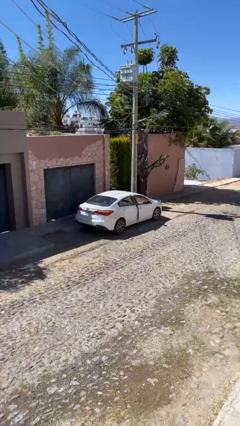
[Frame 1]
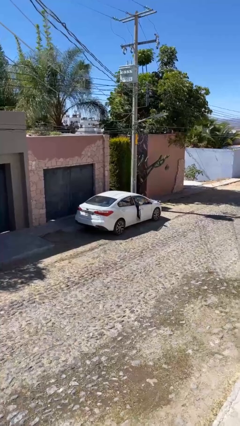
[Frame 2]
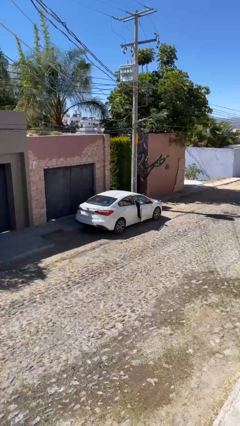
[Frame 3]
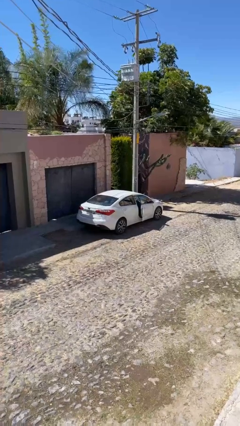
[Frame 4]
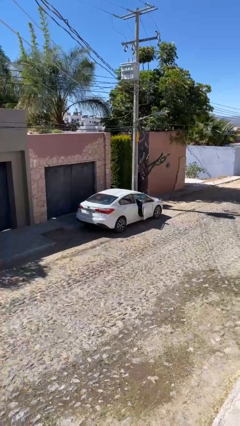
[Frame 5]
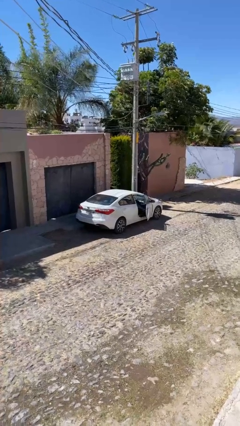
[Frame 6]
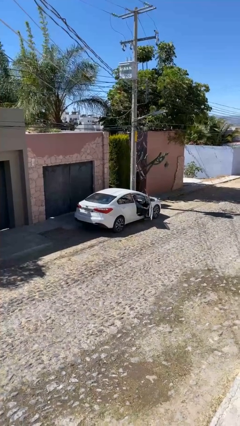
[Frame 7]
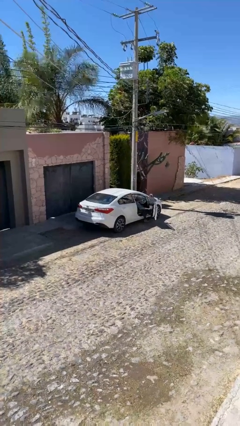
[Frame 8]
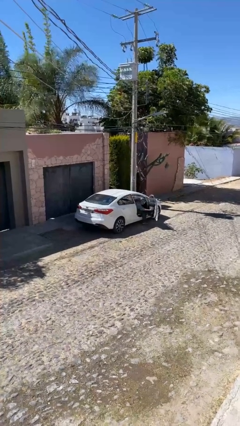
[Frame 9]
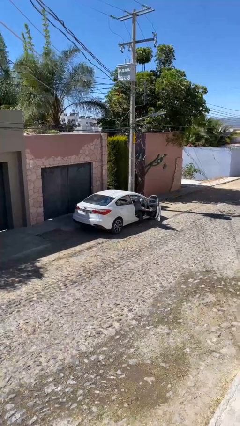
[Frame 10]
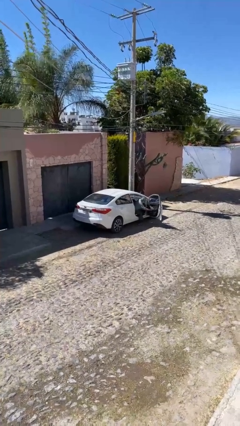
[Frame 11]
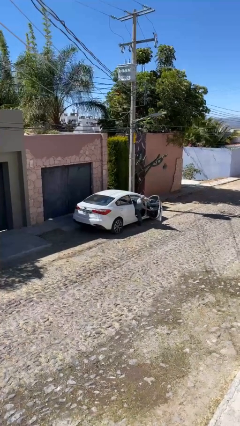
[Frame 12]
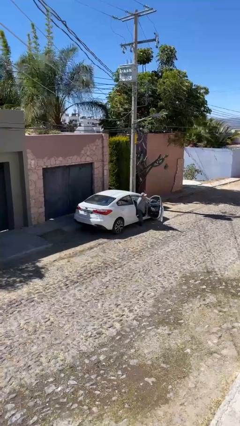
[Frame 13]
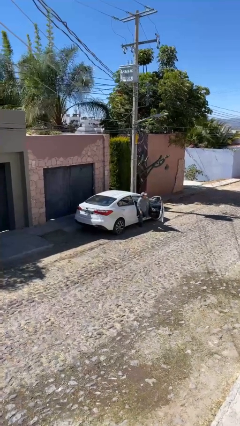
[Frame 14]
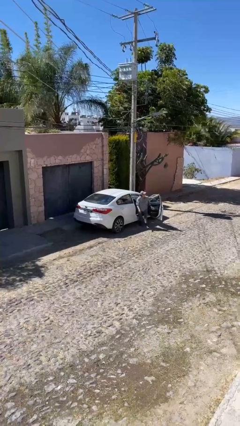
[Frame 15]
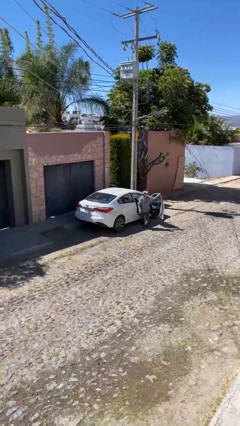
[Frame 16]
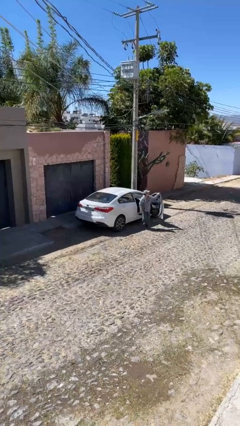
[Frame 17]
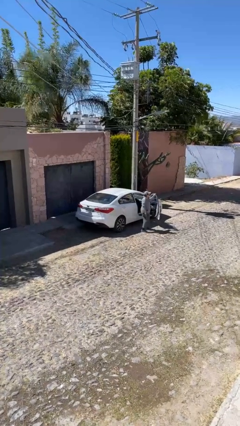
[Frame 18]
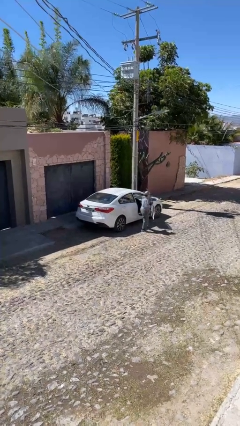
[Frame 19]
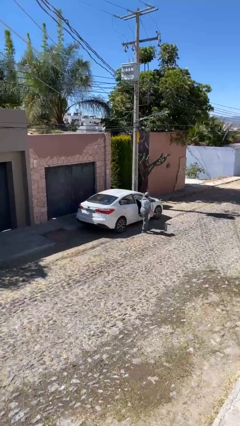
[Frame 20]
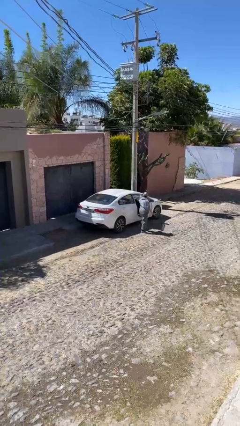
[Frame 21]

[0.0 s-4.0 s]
car drops off person

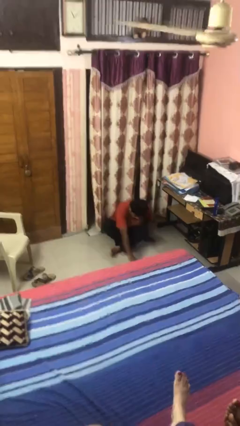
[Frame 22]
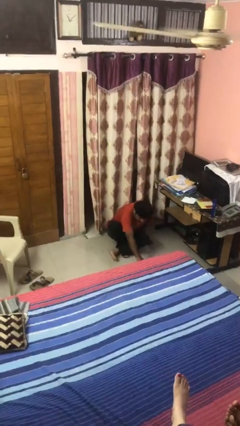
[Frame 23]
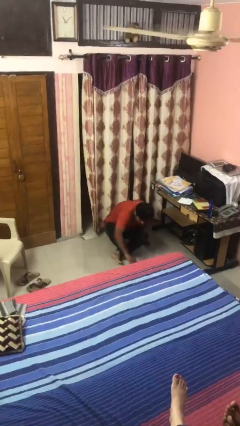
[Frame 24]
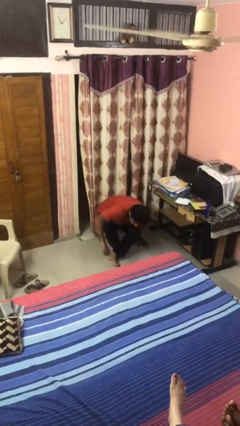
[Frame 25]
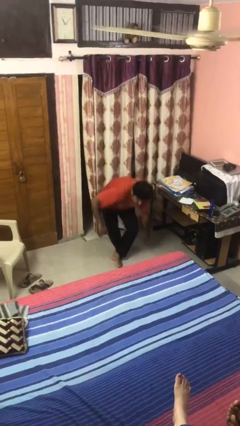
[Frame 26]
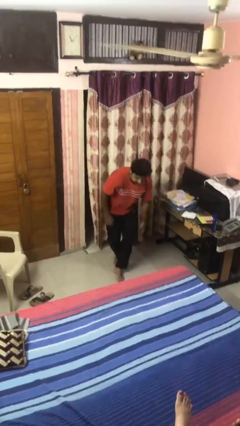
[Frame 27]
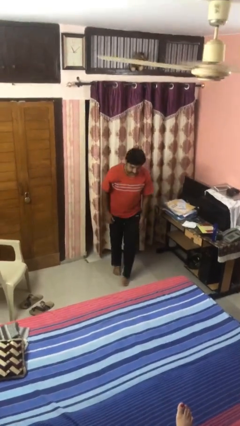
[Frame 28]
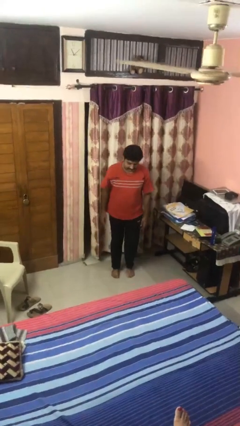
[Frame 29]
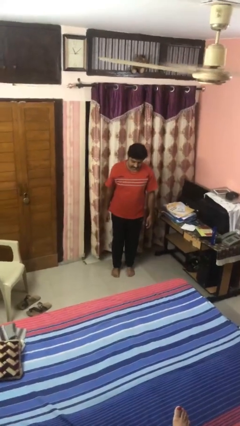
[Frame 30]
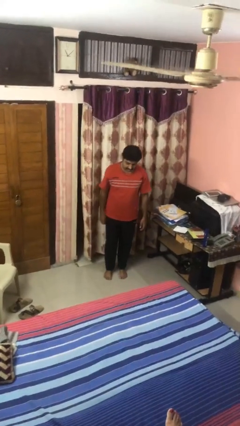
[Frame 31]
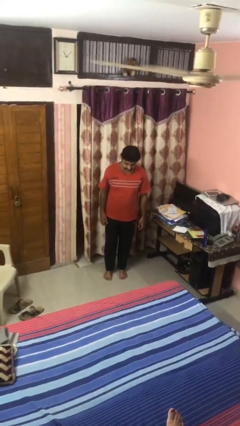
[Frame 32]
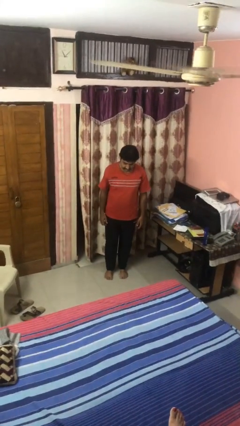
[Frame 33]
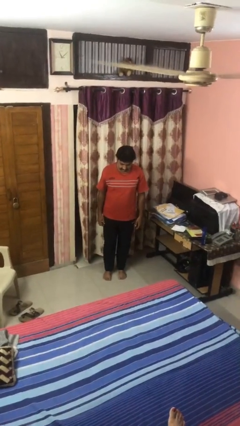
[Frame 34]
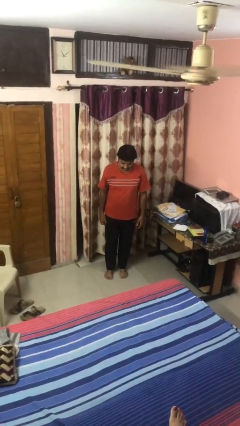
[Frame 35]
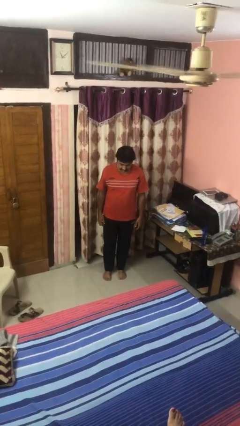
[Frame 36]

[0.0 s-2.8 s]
person stands up from floor

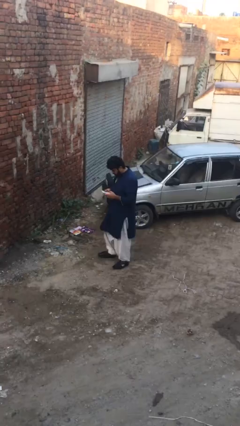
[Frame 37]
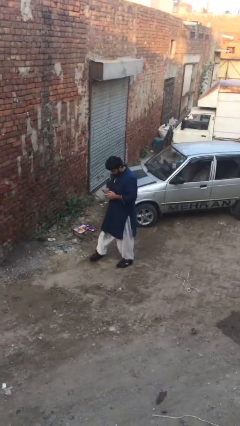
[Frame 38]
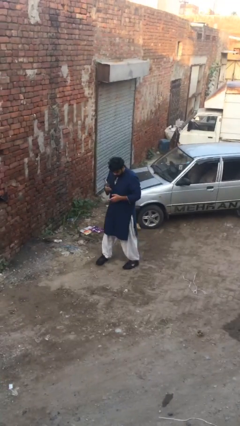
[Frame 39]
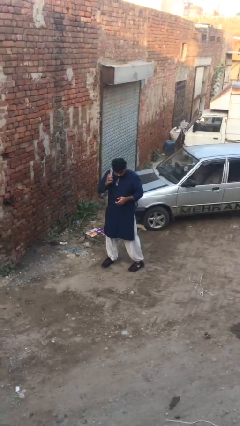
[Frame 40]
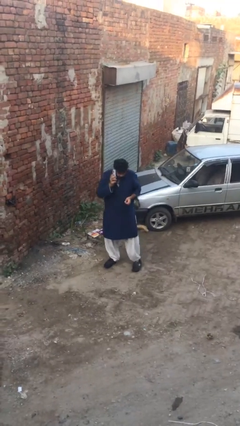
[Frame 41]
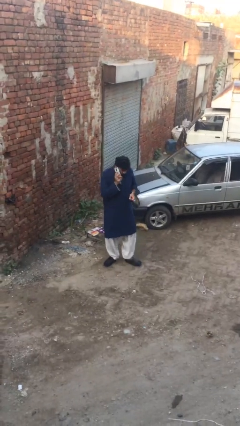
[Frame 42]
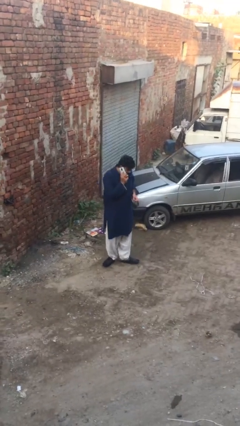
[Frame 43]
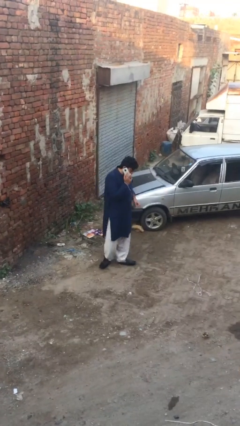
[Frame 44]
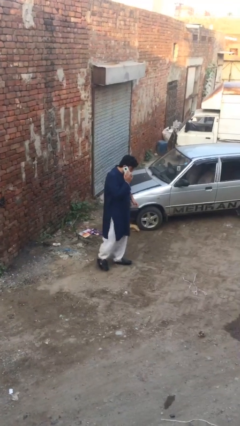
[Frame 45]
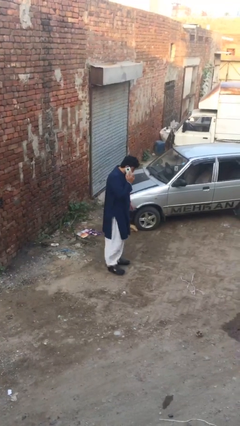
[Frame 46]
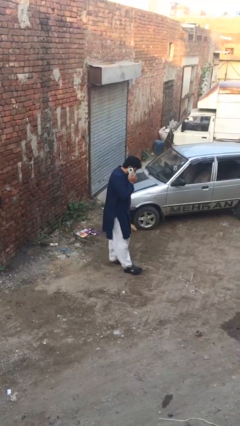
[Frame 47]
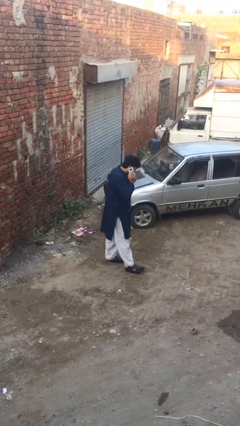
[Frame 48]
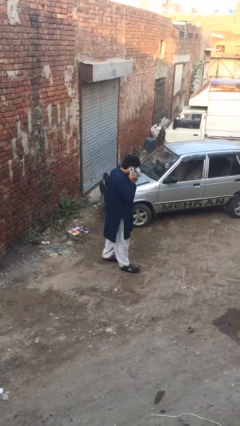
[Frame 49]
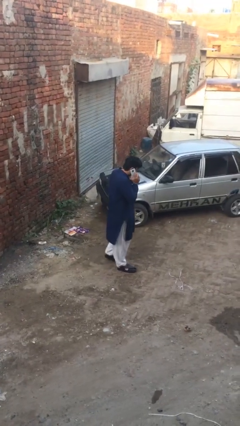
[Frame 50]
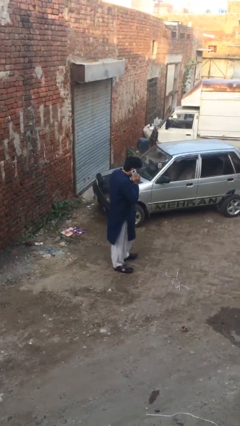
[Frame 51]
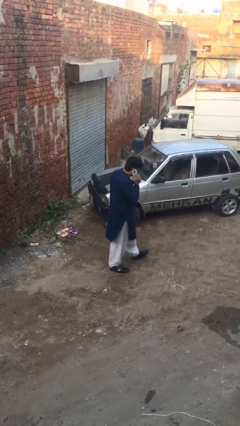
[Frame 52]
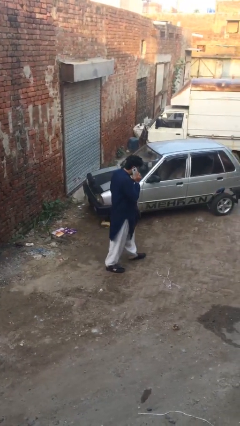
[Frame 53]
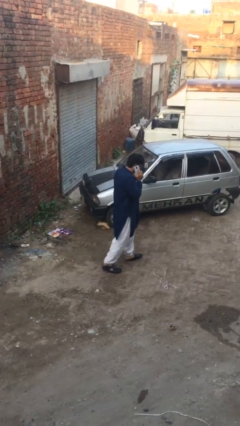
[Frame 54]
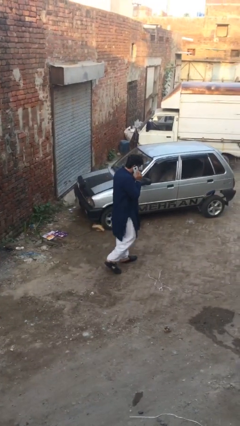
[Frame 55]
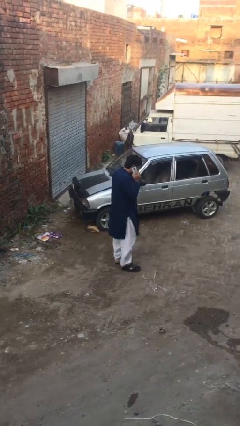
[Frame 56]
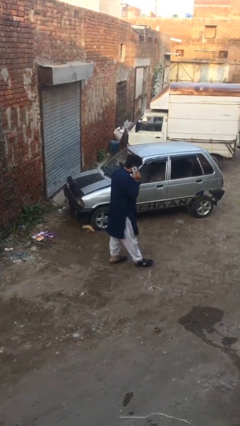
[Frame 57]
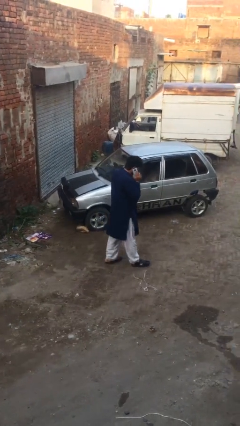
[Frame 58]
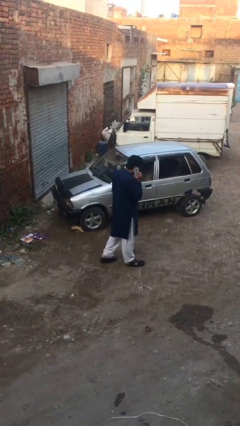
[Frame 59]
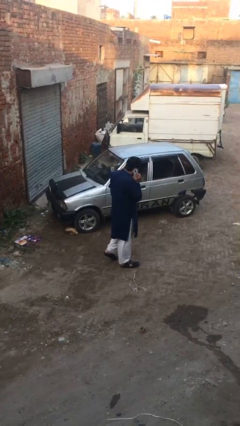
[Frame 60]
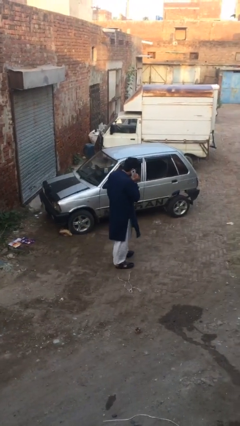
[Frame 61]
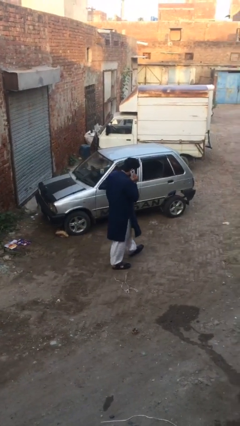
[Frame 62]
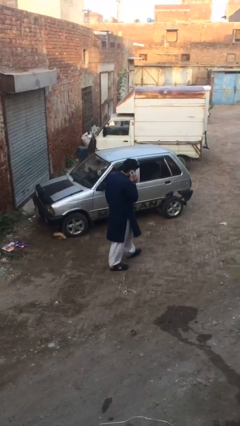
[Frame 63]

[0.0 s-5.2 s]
person talks on phone

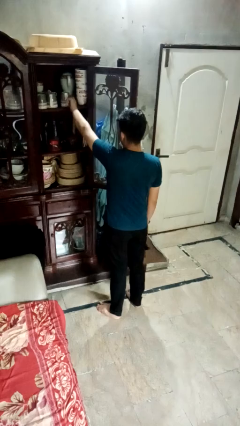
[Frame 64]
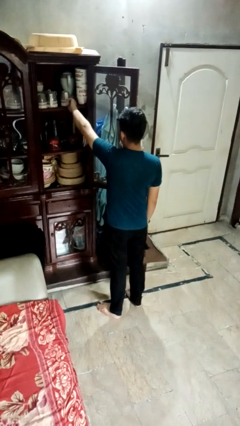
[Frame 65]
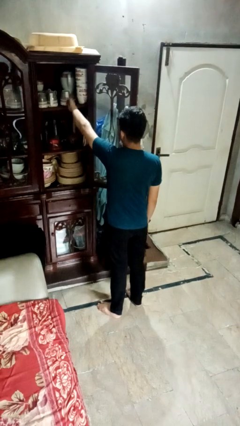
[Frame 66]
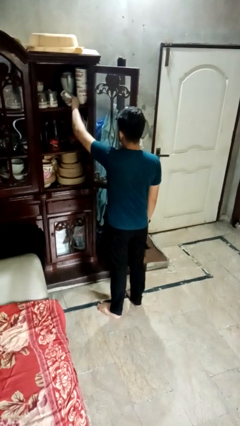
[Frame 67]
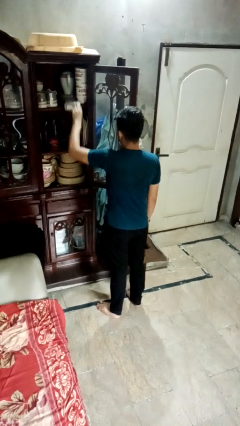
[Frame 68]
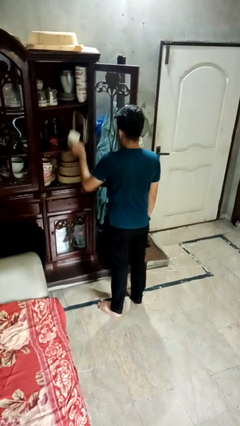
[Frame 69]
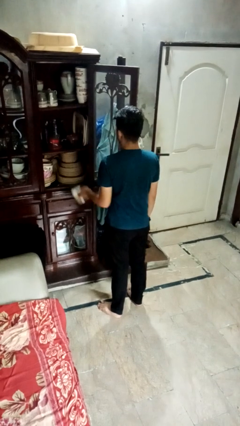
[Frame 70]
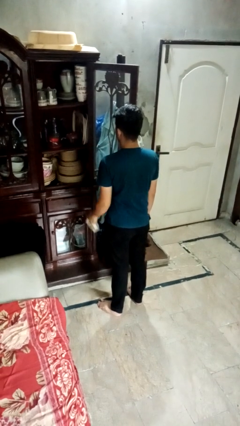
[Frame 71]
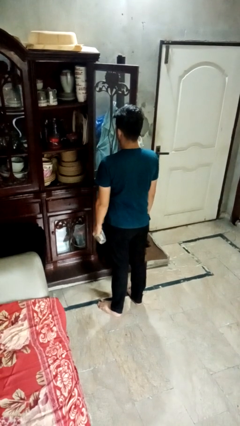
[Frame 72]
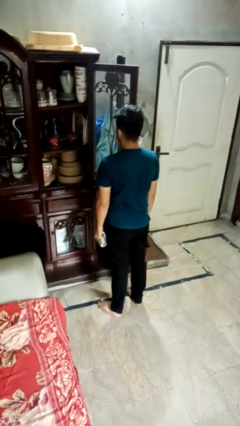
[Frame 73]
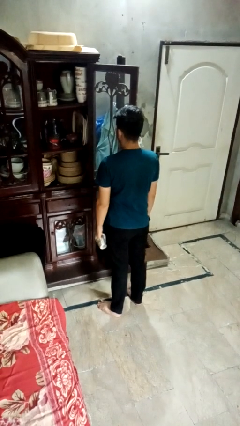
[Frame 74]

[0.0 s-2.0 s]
person takes object from cabinet

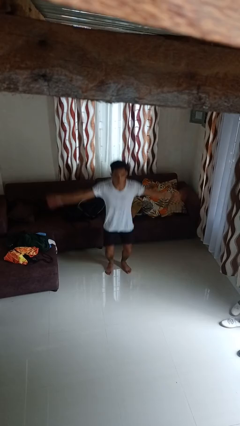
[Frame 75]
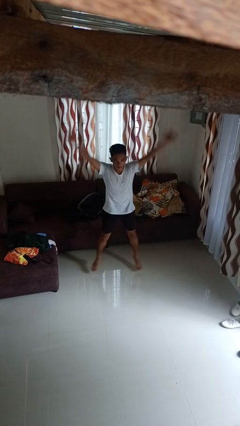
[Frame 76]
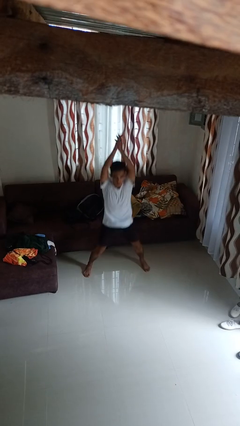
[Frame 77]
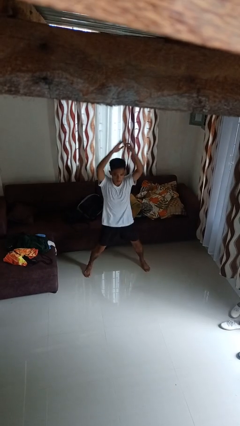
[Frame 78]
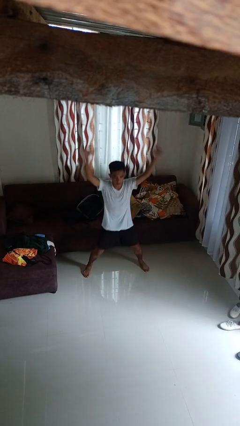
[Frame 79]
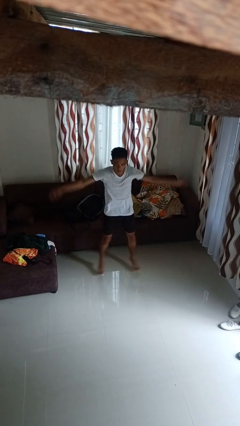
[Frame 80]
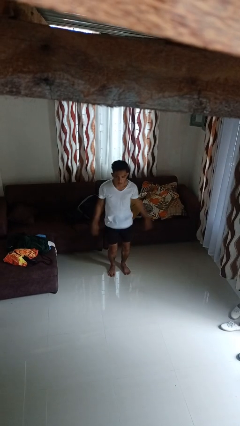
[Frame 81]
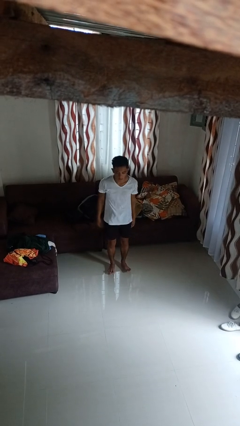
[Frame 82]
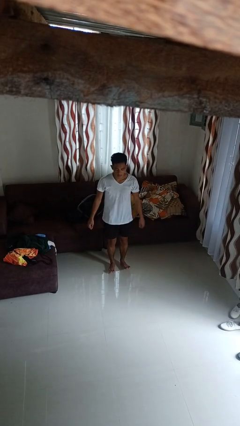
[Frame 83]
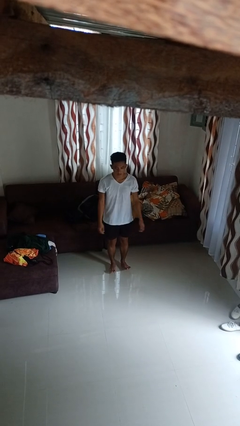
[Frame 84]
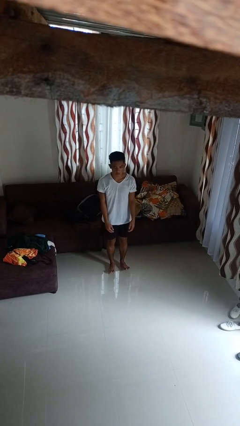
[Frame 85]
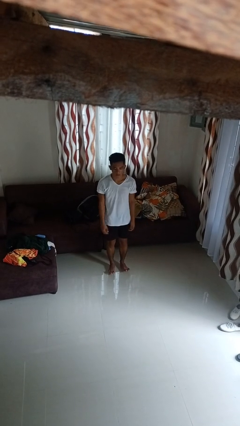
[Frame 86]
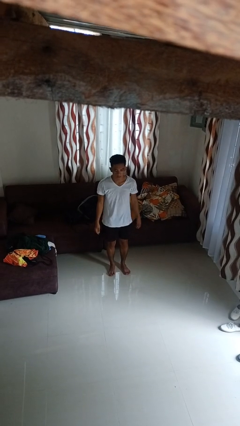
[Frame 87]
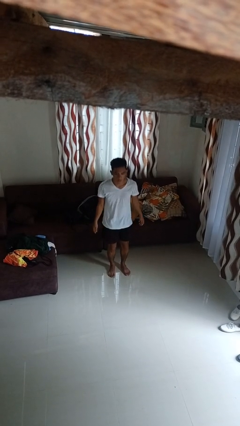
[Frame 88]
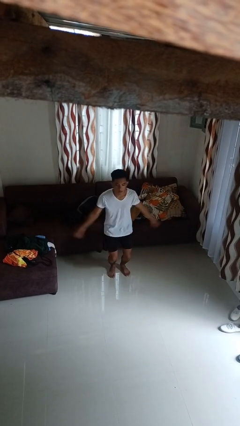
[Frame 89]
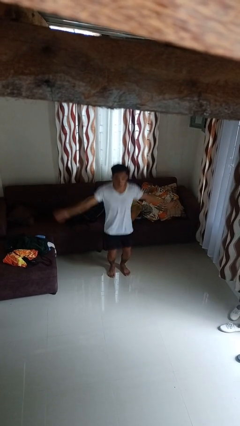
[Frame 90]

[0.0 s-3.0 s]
person exercises with jumping jacks

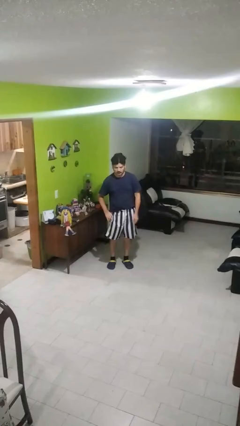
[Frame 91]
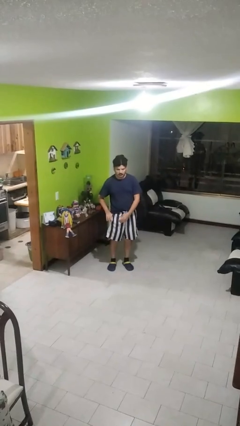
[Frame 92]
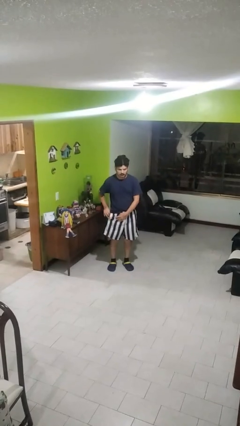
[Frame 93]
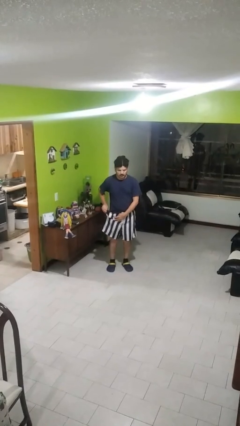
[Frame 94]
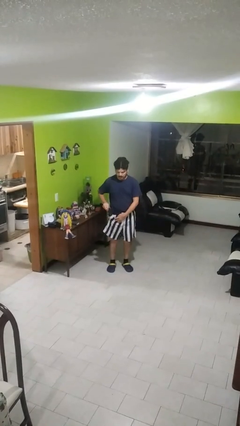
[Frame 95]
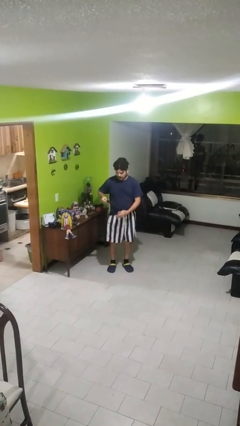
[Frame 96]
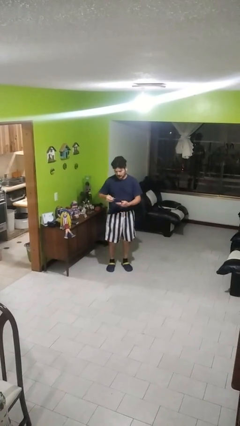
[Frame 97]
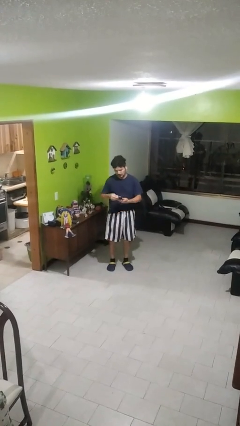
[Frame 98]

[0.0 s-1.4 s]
person takes phone from pocket
